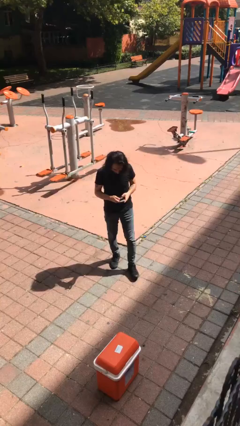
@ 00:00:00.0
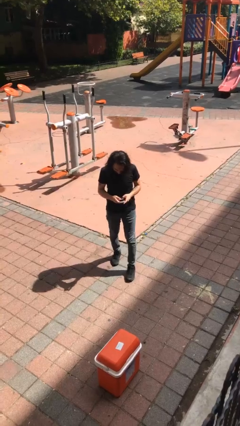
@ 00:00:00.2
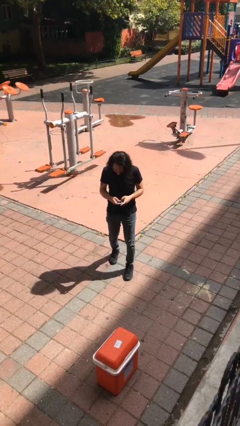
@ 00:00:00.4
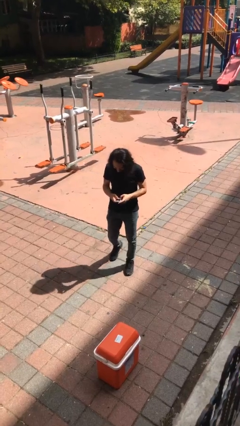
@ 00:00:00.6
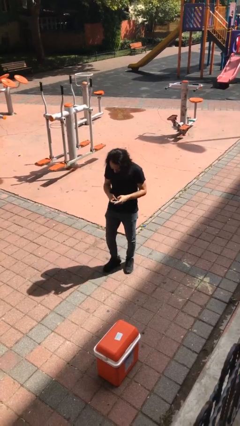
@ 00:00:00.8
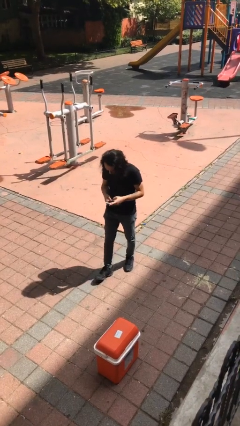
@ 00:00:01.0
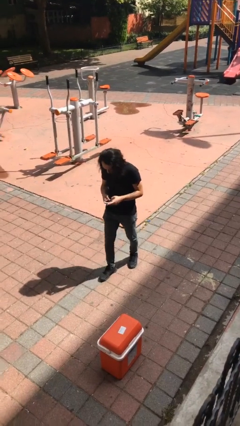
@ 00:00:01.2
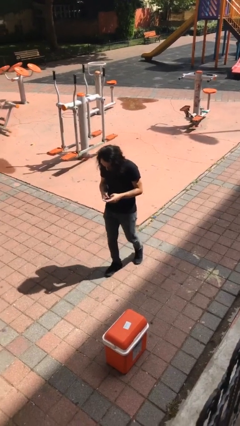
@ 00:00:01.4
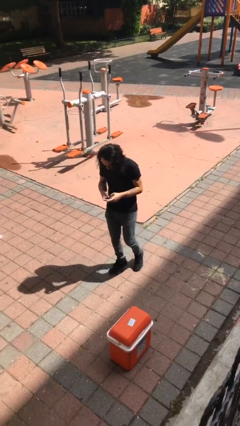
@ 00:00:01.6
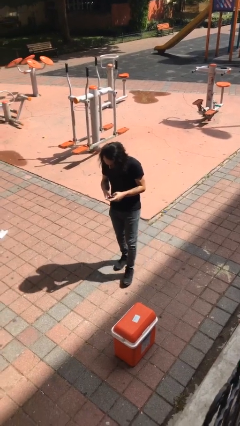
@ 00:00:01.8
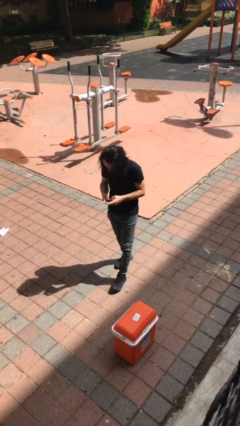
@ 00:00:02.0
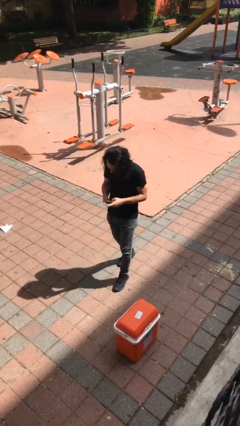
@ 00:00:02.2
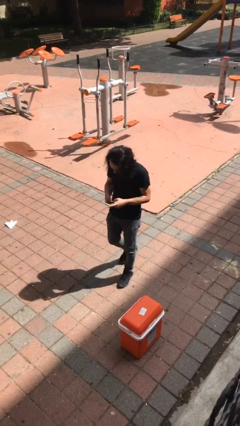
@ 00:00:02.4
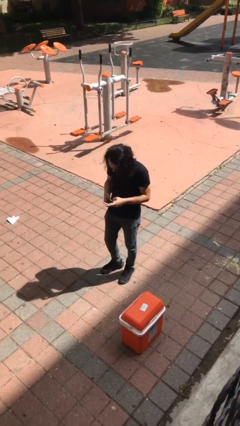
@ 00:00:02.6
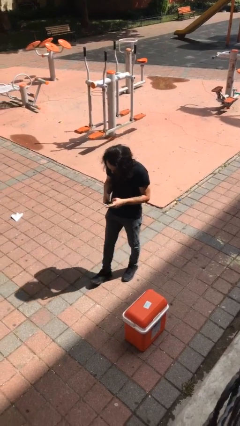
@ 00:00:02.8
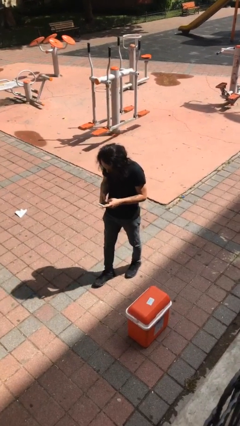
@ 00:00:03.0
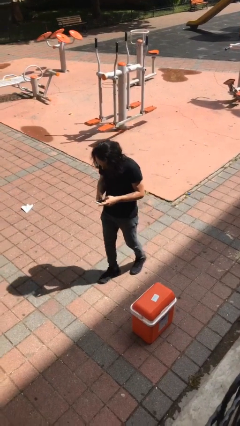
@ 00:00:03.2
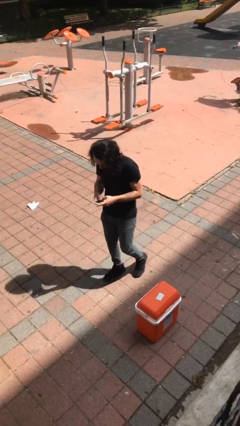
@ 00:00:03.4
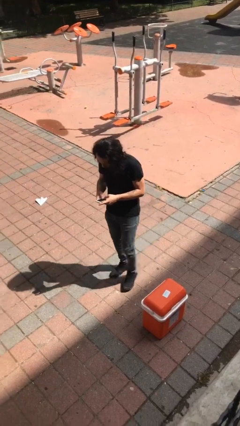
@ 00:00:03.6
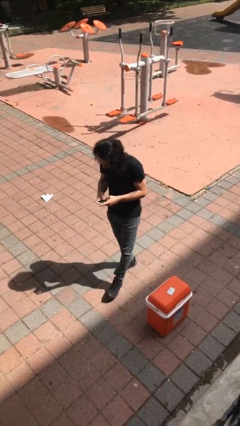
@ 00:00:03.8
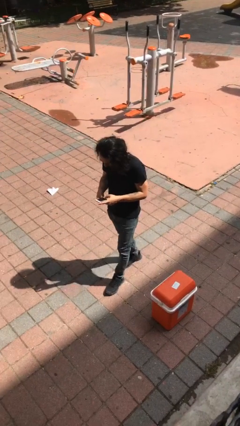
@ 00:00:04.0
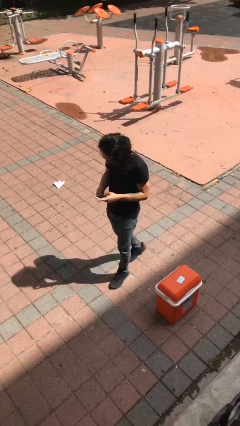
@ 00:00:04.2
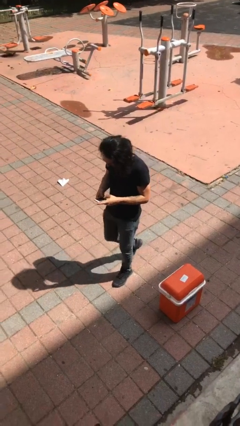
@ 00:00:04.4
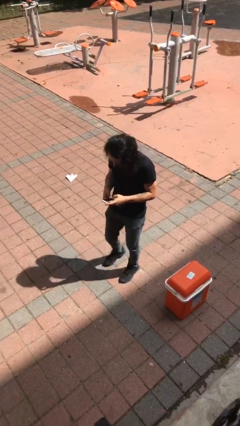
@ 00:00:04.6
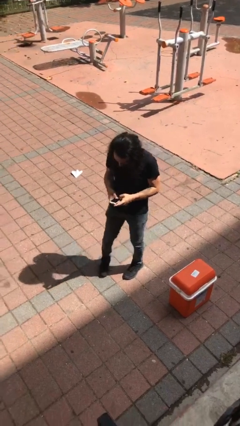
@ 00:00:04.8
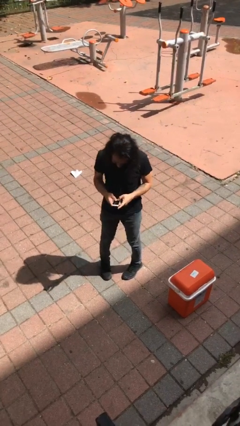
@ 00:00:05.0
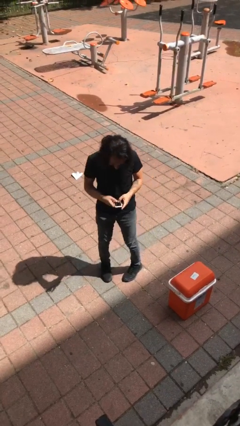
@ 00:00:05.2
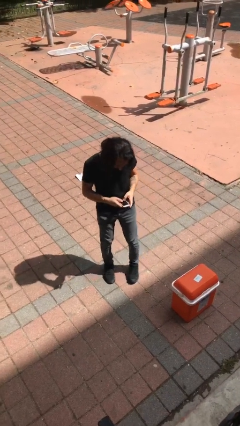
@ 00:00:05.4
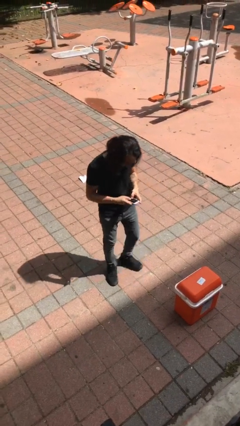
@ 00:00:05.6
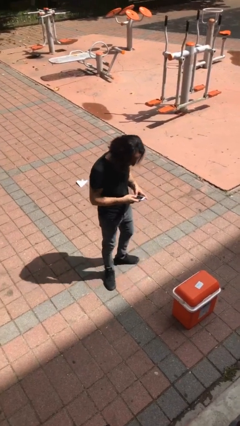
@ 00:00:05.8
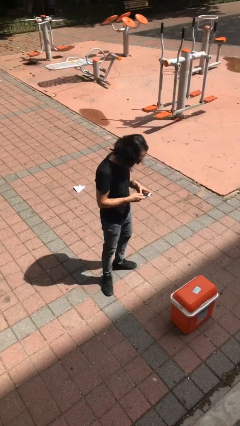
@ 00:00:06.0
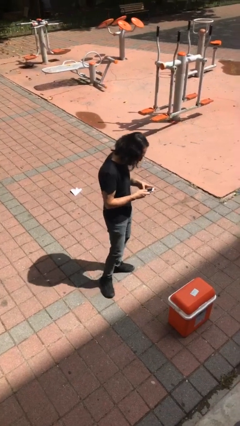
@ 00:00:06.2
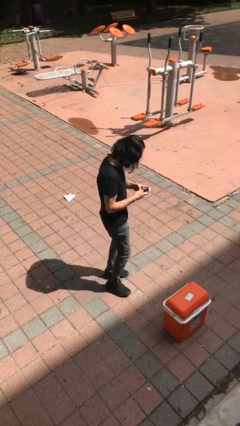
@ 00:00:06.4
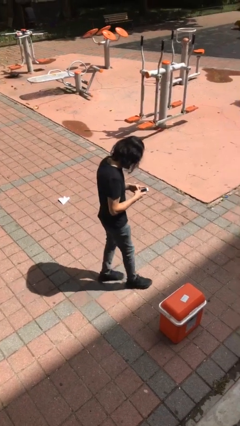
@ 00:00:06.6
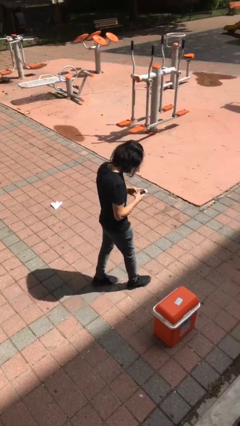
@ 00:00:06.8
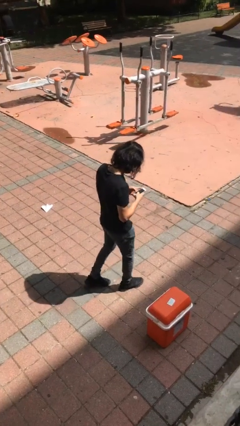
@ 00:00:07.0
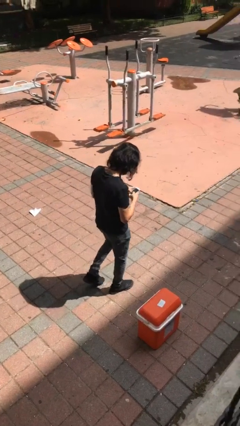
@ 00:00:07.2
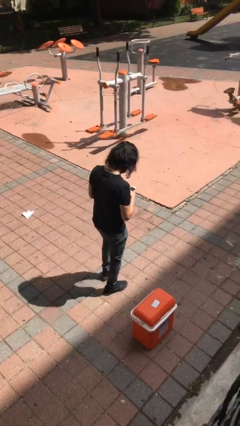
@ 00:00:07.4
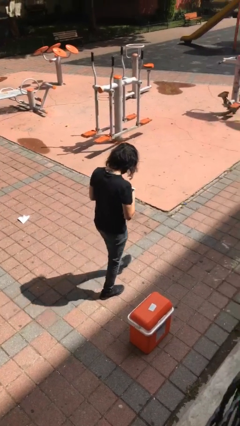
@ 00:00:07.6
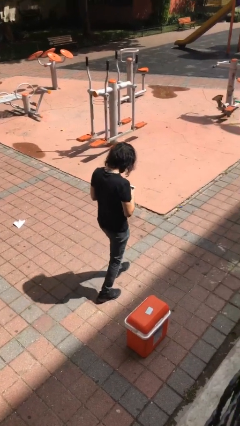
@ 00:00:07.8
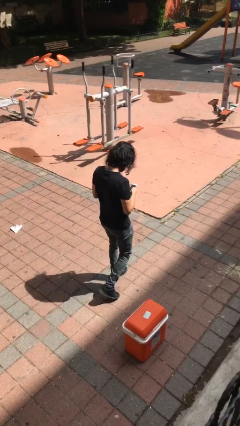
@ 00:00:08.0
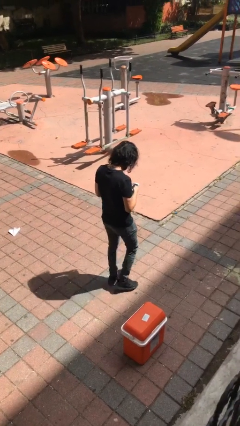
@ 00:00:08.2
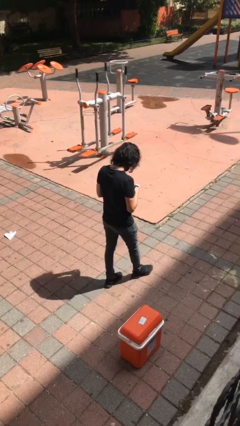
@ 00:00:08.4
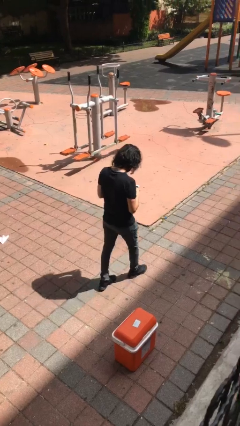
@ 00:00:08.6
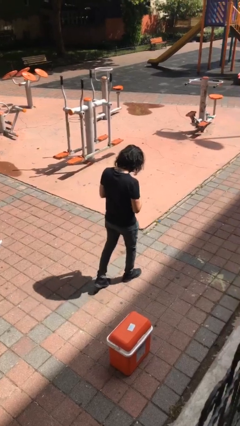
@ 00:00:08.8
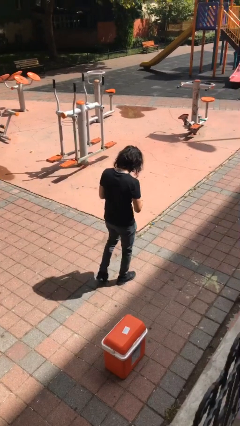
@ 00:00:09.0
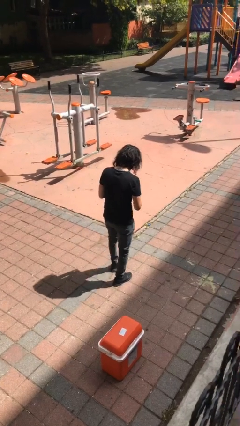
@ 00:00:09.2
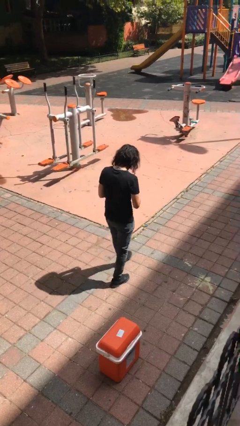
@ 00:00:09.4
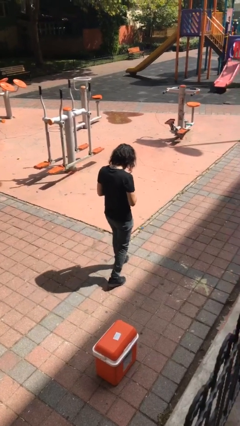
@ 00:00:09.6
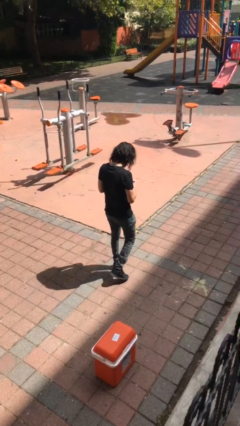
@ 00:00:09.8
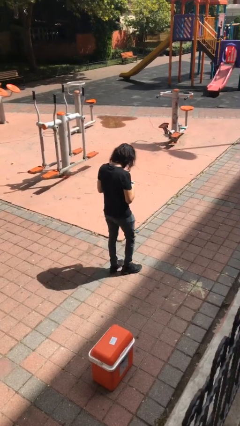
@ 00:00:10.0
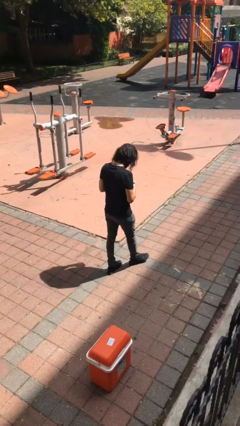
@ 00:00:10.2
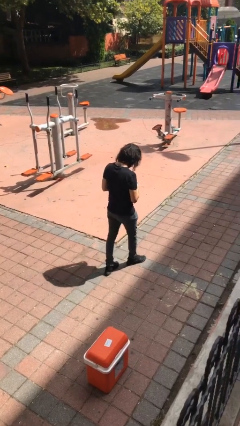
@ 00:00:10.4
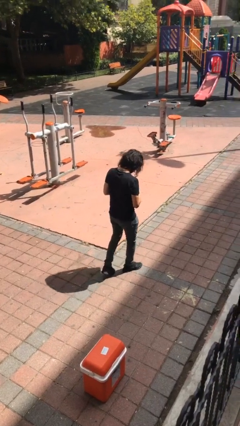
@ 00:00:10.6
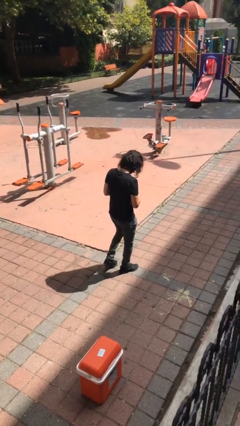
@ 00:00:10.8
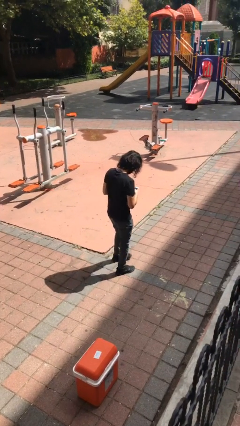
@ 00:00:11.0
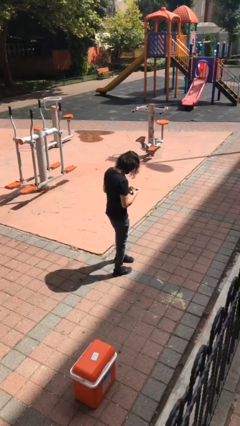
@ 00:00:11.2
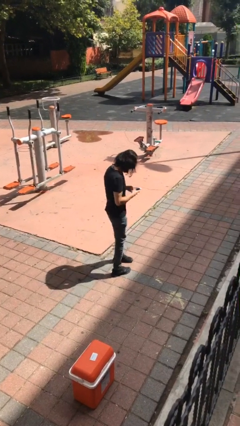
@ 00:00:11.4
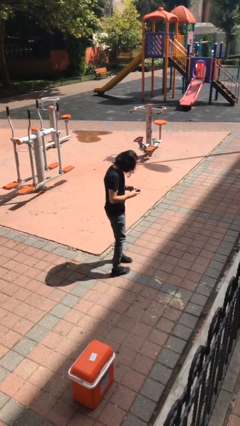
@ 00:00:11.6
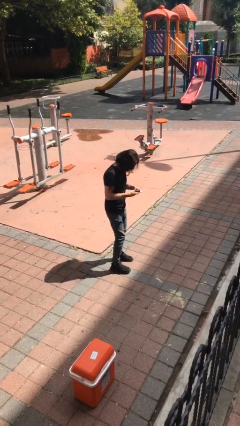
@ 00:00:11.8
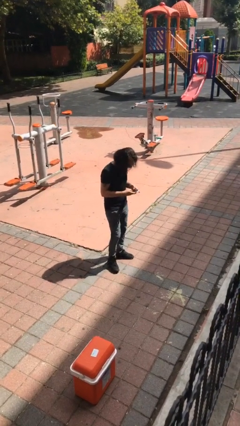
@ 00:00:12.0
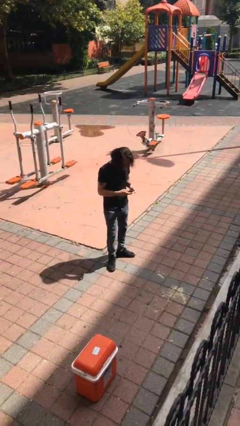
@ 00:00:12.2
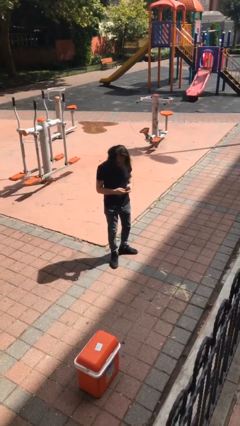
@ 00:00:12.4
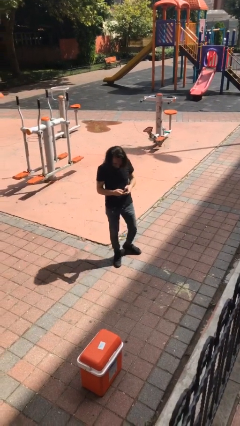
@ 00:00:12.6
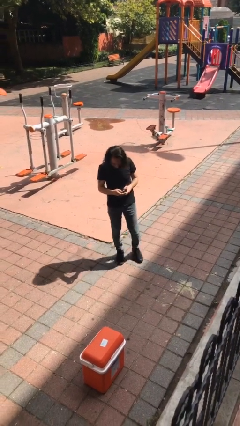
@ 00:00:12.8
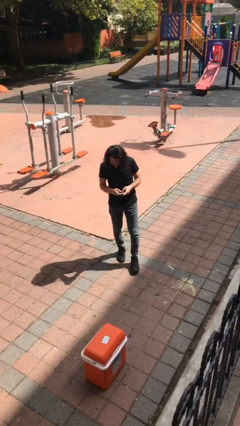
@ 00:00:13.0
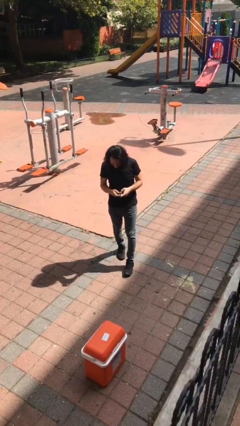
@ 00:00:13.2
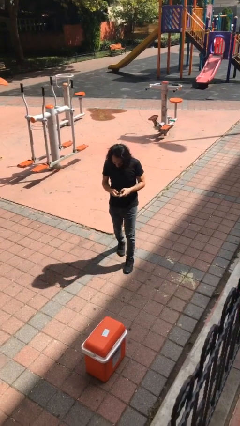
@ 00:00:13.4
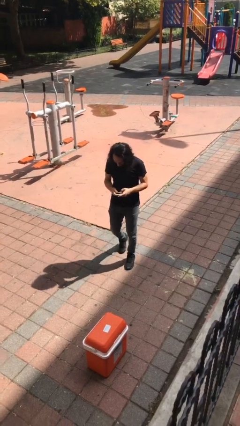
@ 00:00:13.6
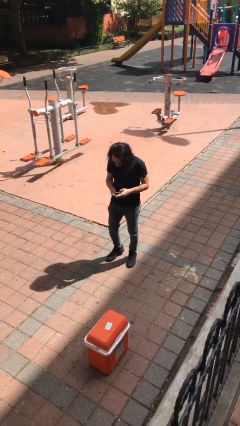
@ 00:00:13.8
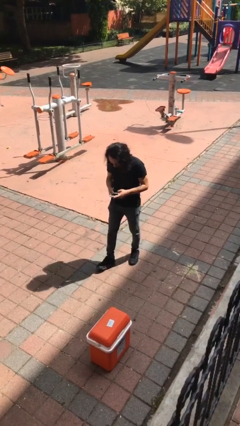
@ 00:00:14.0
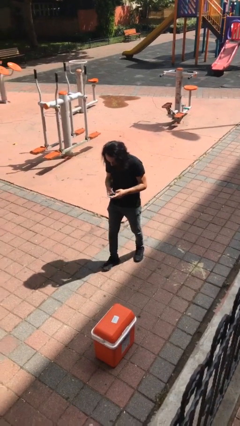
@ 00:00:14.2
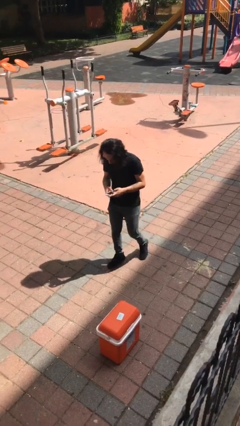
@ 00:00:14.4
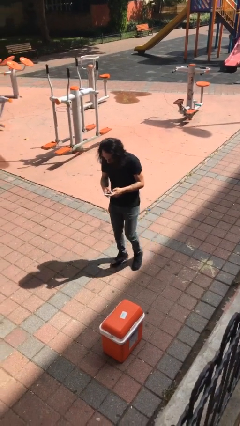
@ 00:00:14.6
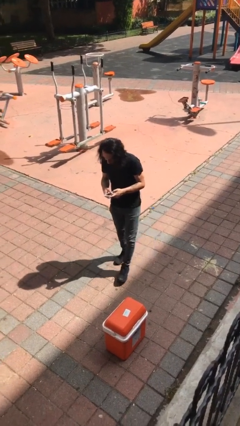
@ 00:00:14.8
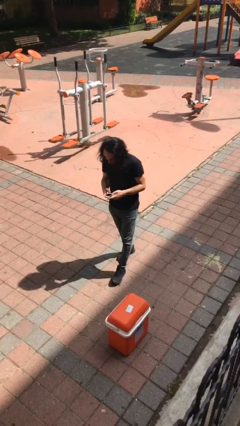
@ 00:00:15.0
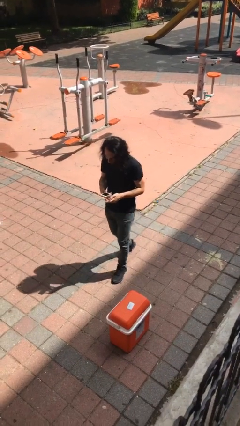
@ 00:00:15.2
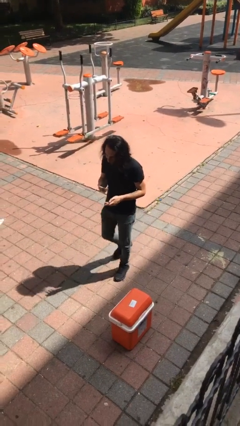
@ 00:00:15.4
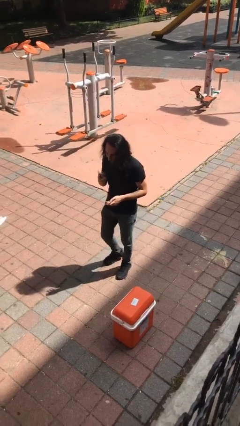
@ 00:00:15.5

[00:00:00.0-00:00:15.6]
person texts on phone

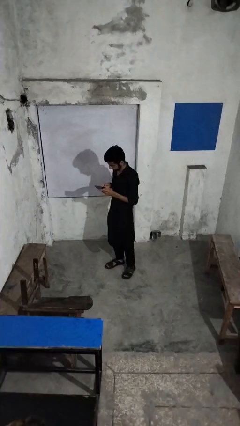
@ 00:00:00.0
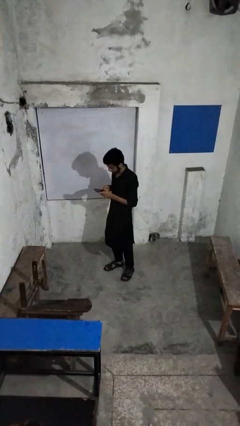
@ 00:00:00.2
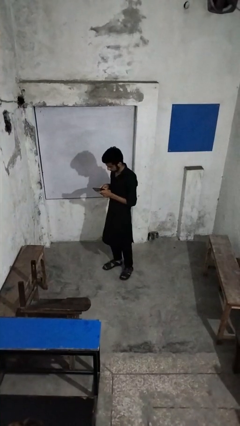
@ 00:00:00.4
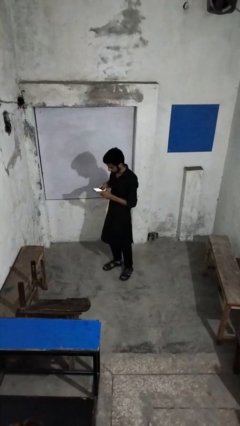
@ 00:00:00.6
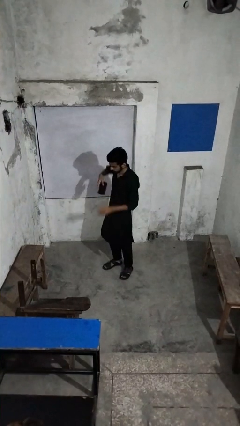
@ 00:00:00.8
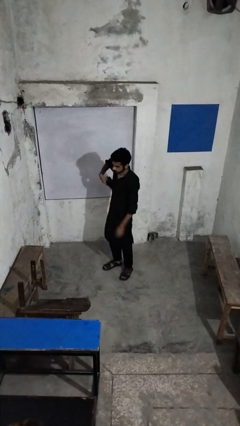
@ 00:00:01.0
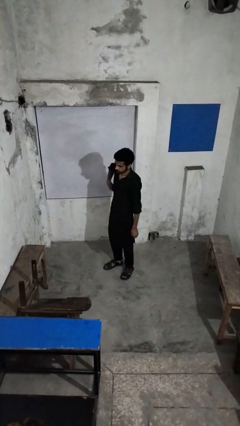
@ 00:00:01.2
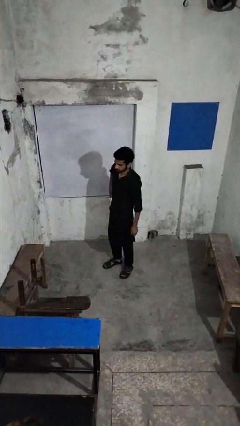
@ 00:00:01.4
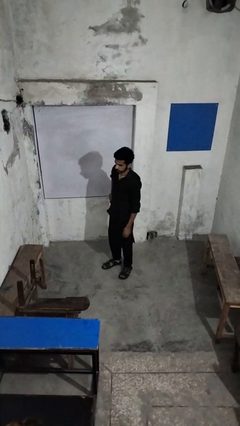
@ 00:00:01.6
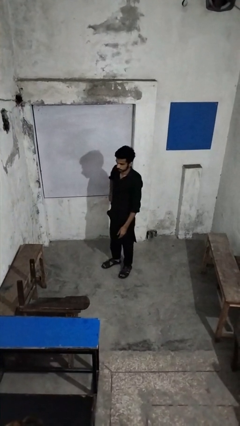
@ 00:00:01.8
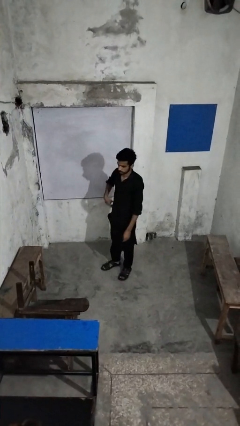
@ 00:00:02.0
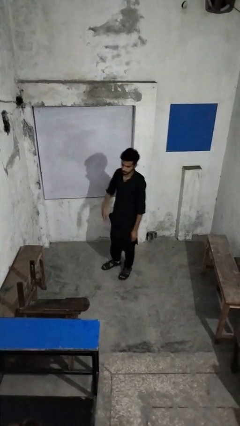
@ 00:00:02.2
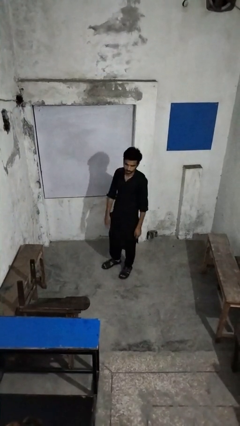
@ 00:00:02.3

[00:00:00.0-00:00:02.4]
person puts phone into pocket
